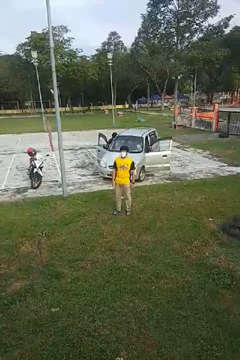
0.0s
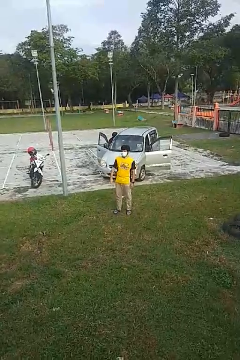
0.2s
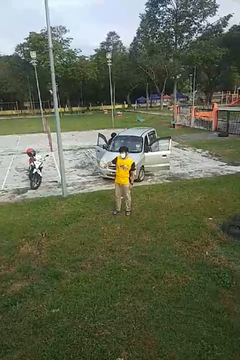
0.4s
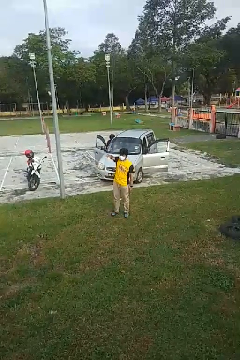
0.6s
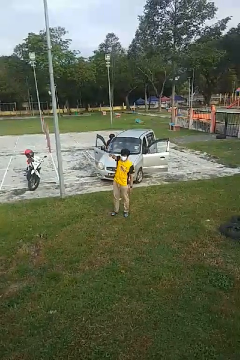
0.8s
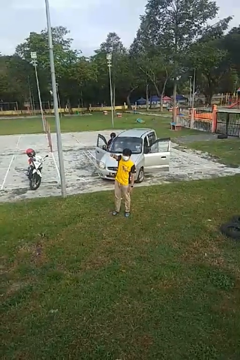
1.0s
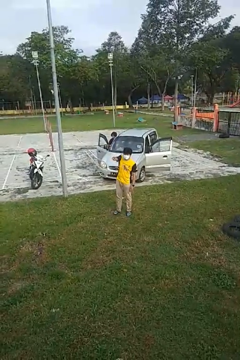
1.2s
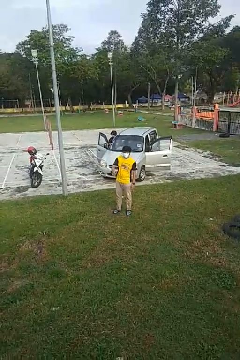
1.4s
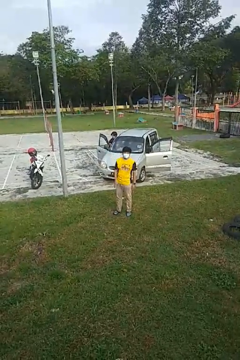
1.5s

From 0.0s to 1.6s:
person points at person

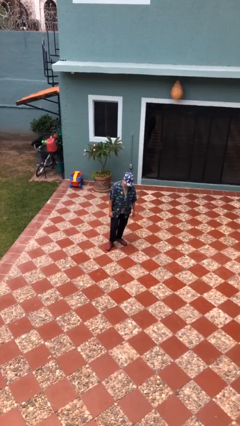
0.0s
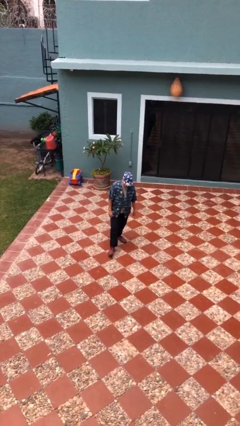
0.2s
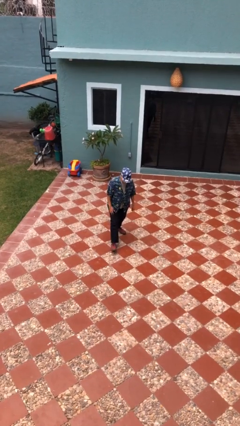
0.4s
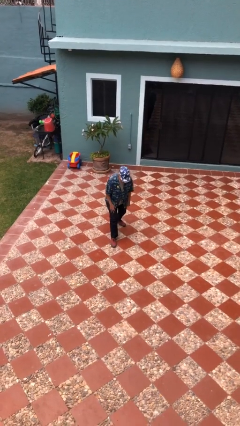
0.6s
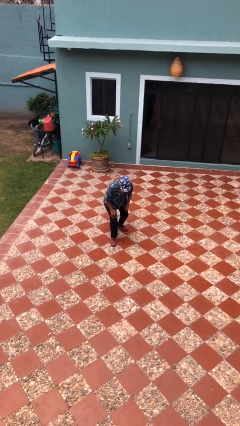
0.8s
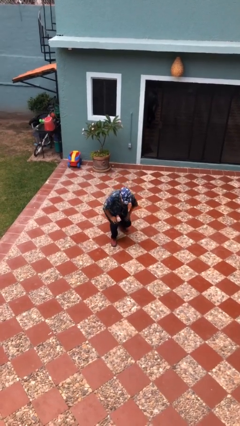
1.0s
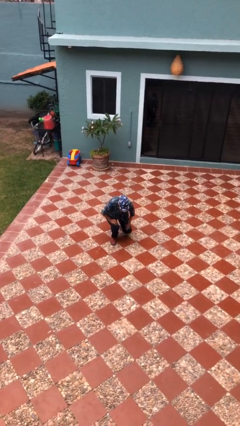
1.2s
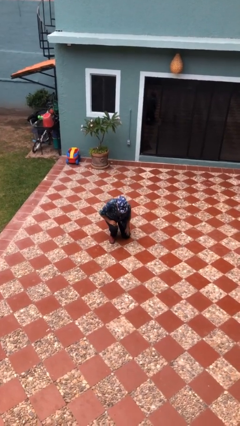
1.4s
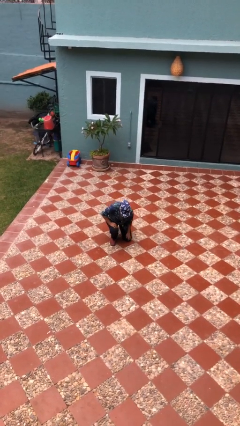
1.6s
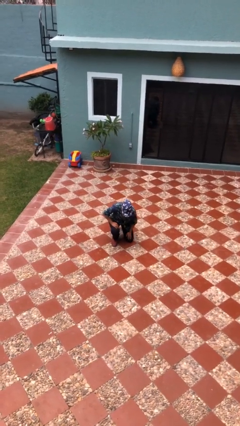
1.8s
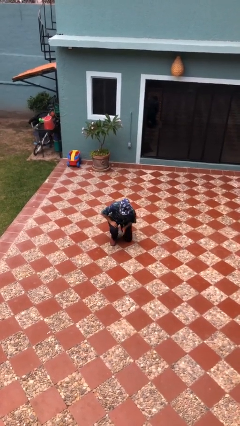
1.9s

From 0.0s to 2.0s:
person kneels

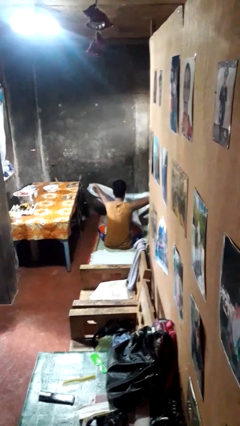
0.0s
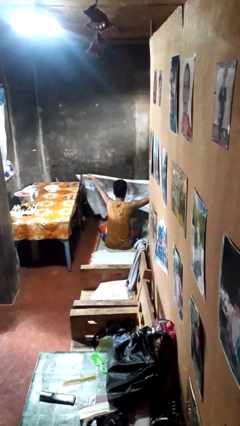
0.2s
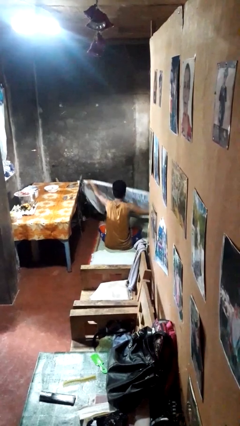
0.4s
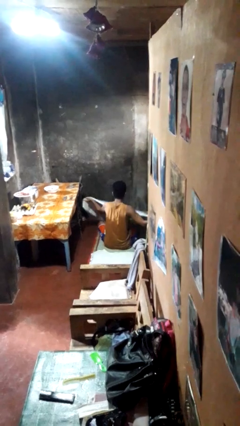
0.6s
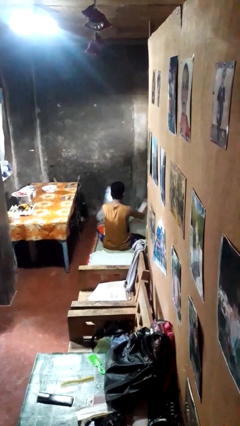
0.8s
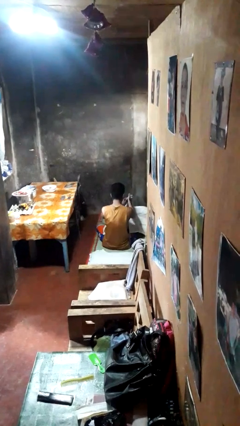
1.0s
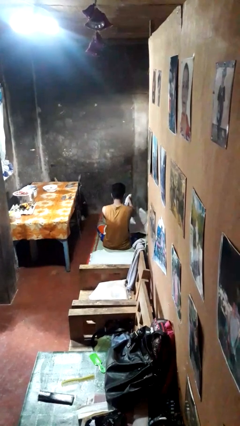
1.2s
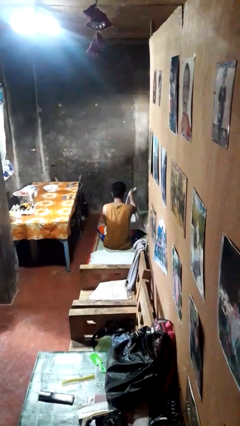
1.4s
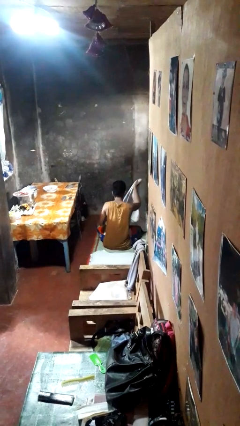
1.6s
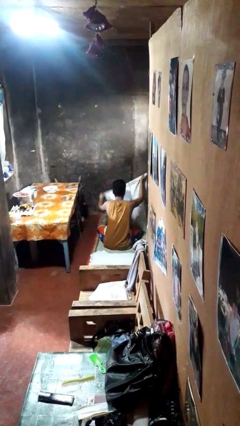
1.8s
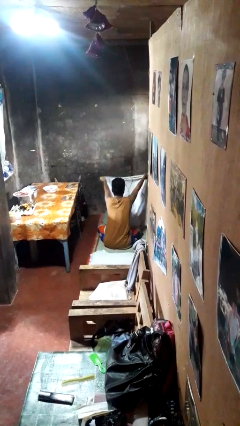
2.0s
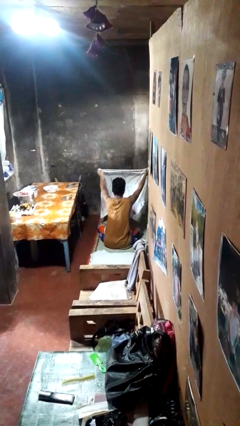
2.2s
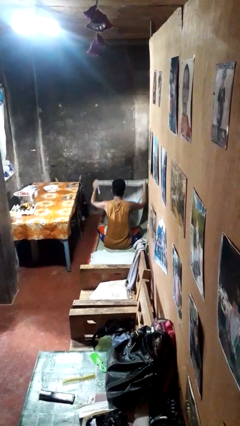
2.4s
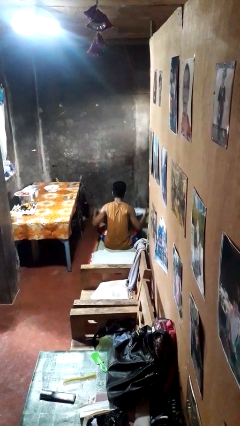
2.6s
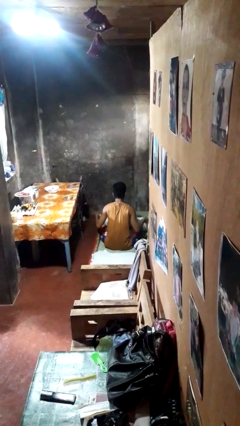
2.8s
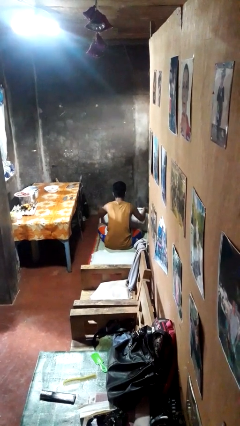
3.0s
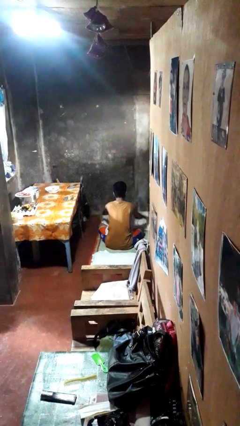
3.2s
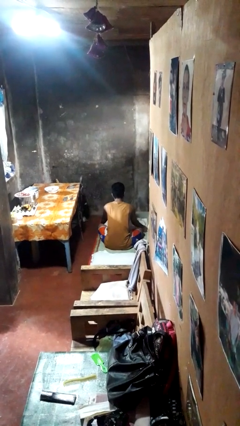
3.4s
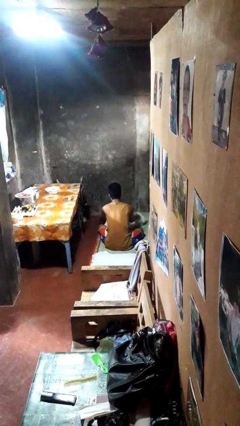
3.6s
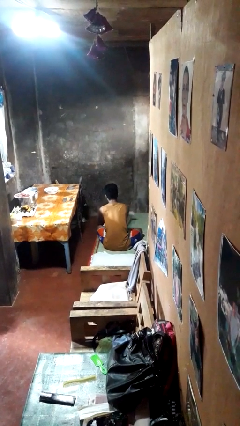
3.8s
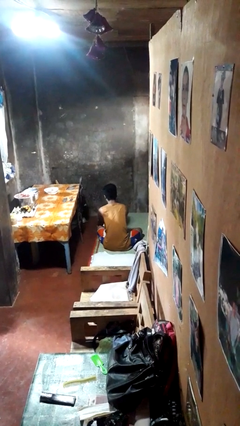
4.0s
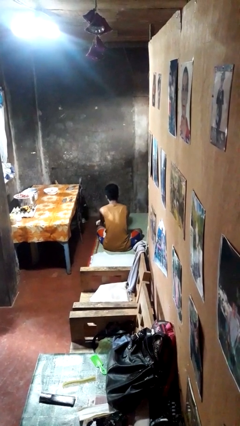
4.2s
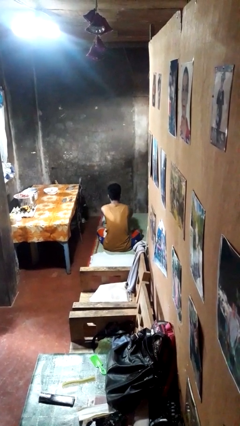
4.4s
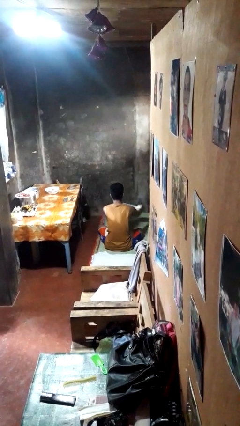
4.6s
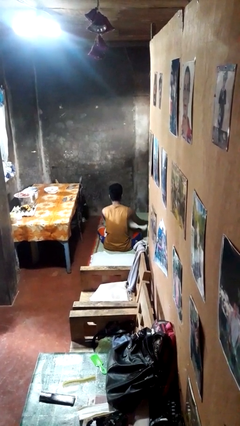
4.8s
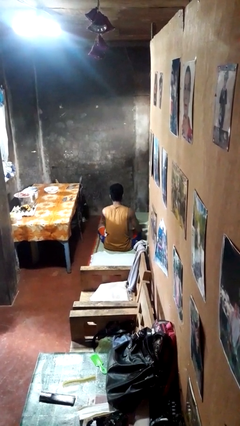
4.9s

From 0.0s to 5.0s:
person folds blanket

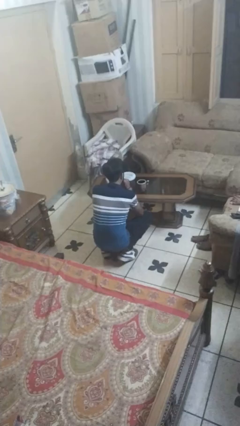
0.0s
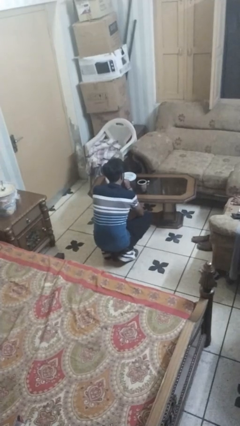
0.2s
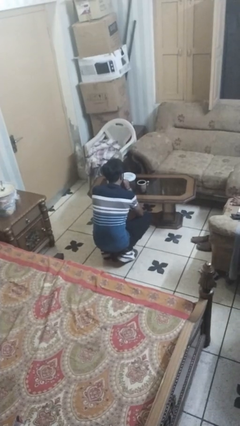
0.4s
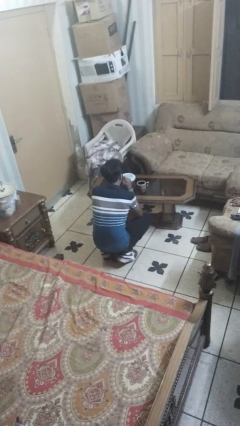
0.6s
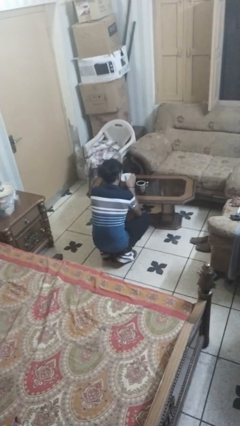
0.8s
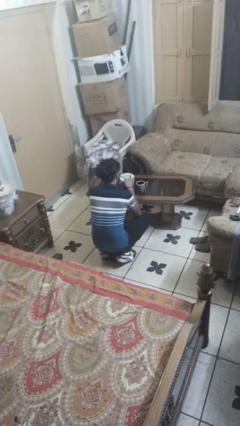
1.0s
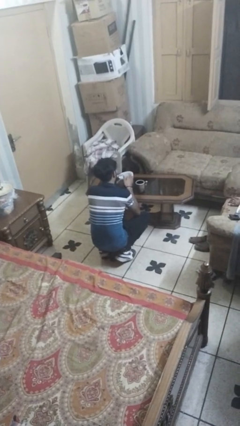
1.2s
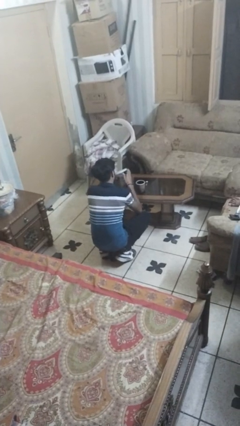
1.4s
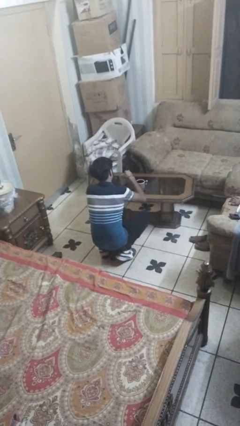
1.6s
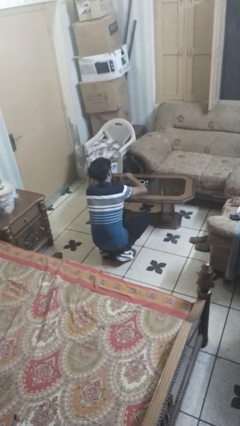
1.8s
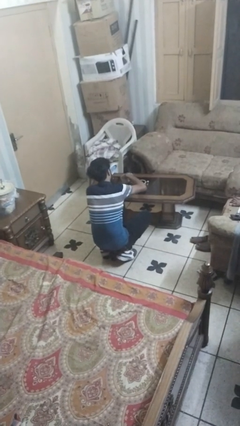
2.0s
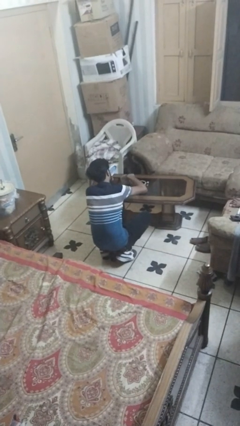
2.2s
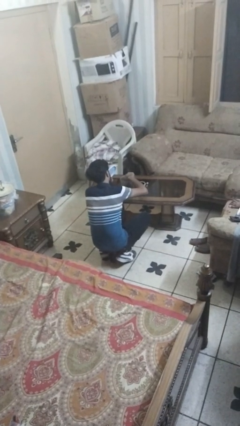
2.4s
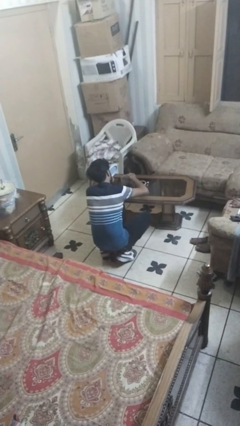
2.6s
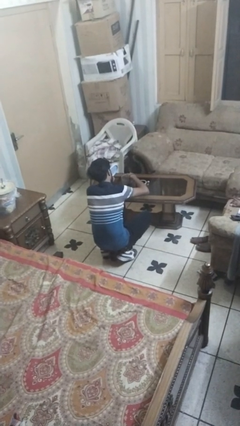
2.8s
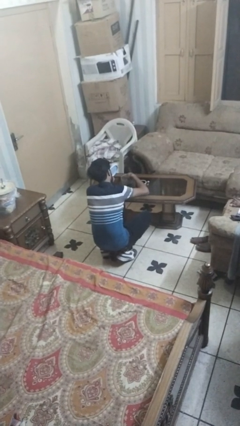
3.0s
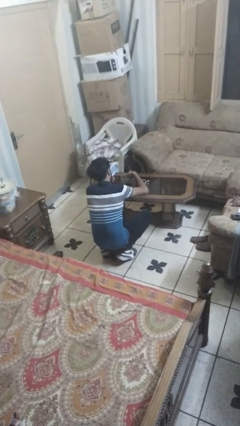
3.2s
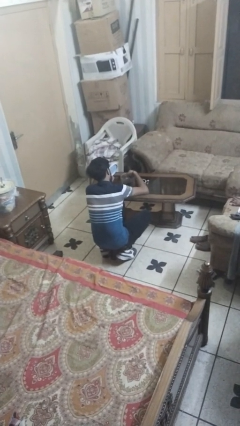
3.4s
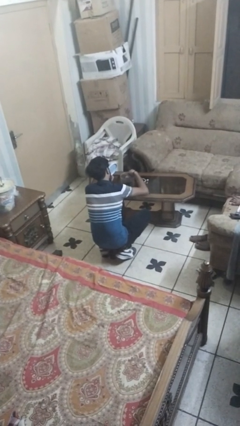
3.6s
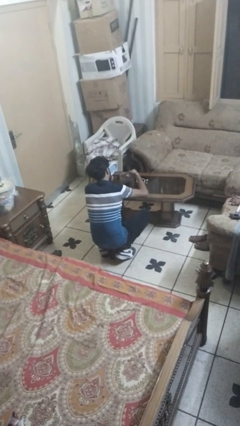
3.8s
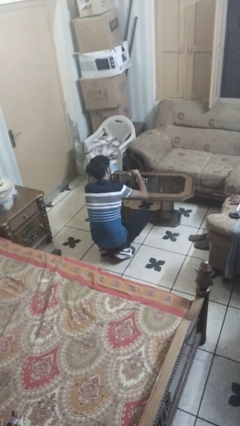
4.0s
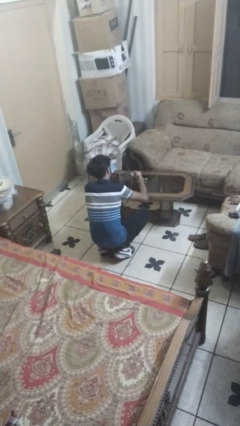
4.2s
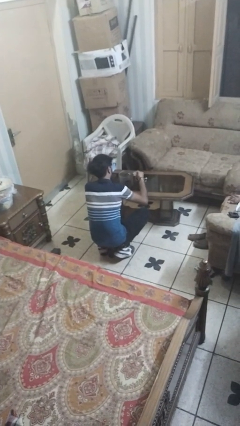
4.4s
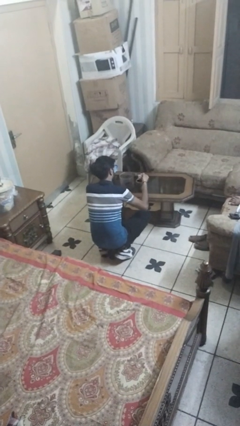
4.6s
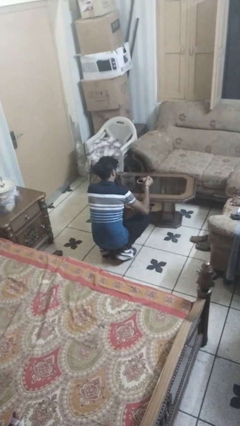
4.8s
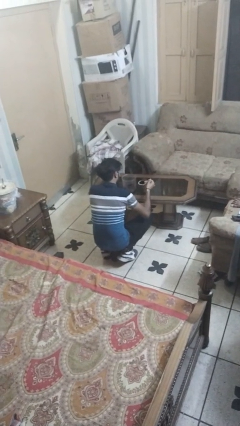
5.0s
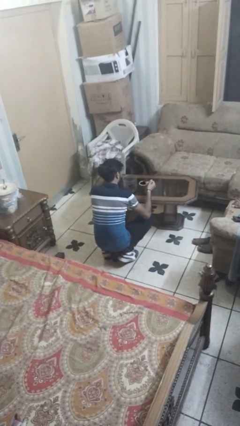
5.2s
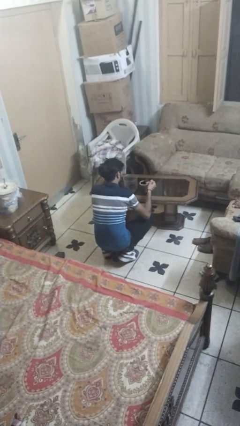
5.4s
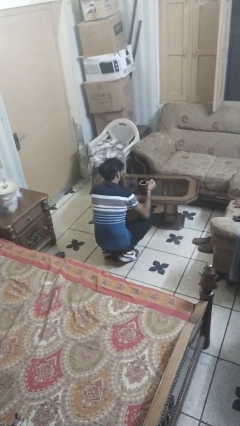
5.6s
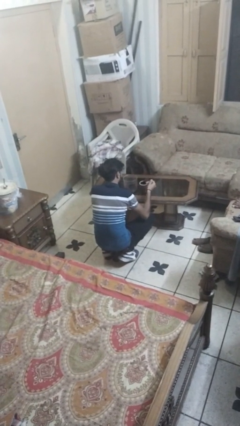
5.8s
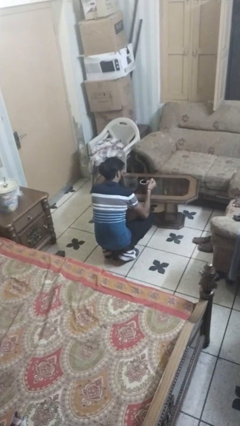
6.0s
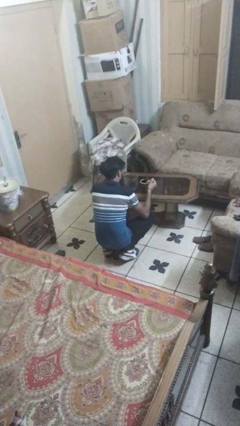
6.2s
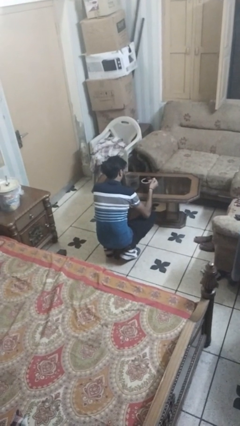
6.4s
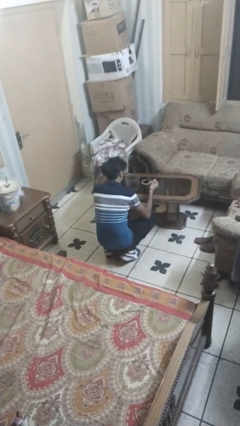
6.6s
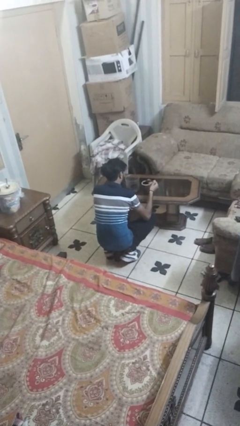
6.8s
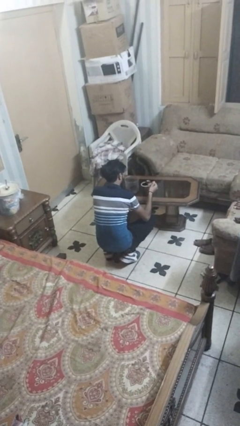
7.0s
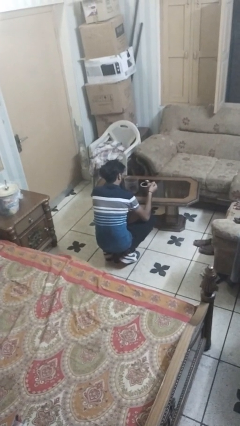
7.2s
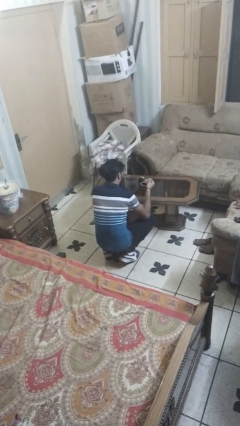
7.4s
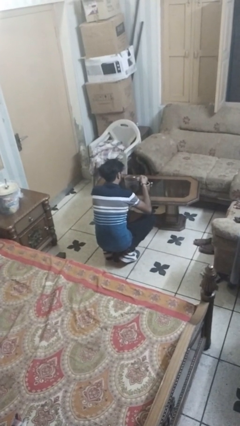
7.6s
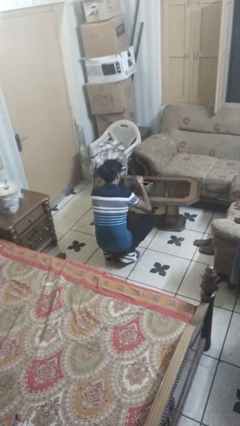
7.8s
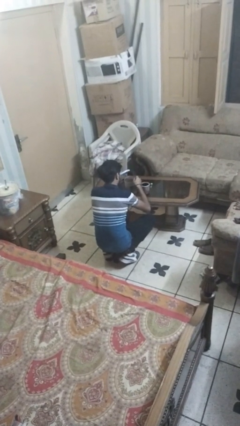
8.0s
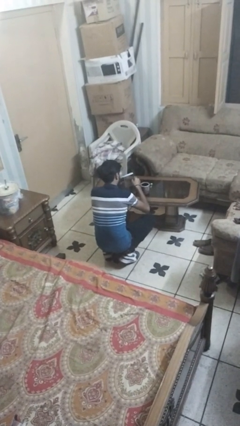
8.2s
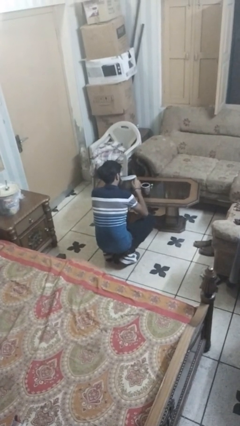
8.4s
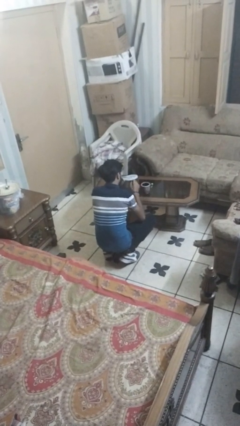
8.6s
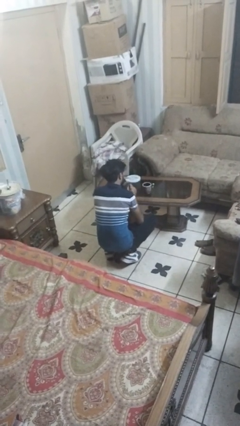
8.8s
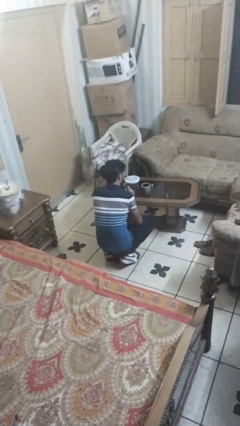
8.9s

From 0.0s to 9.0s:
person pours coffee into mug

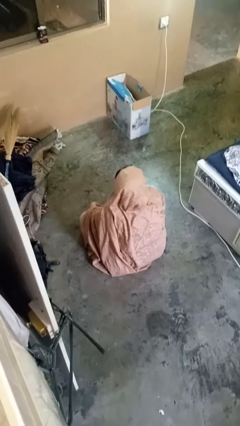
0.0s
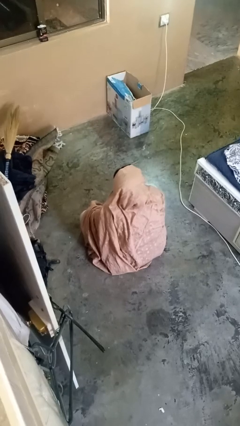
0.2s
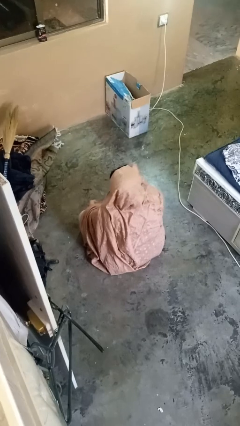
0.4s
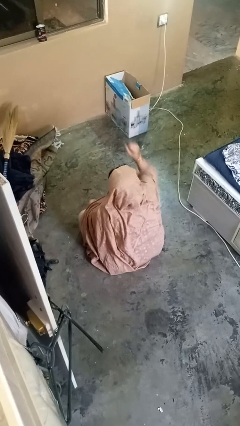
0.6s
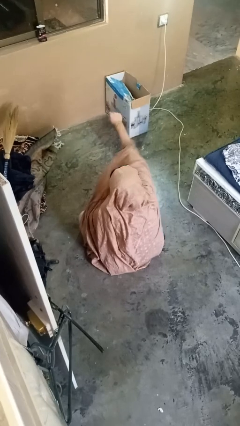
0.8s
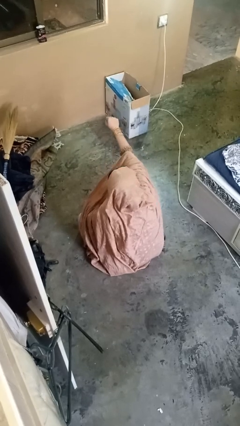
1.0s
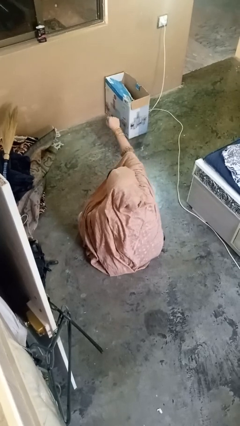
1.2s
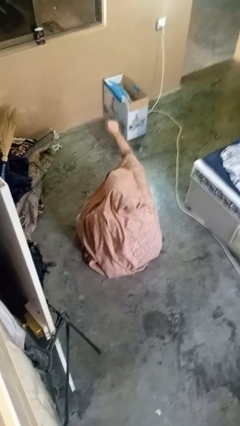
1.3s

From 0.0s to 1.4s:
person punches
